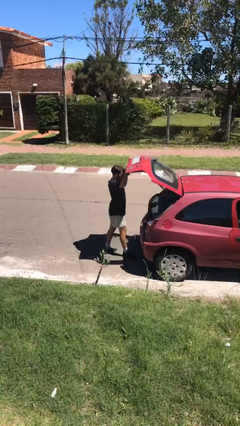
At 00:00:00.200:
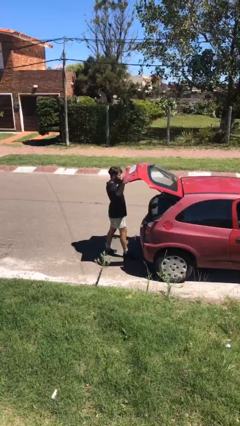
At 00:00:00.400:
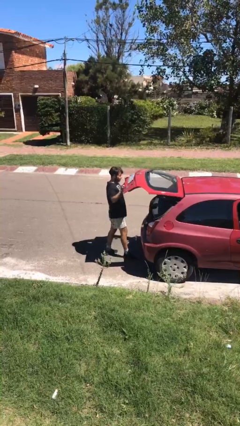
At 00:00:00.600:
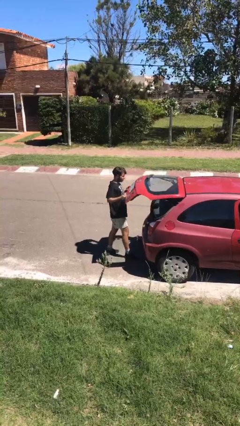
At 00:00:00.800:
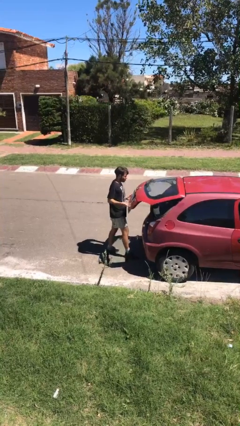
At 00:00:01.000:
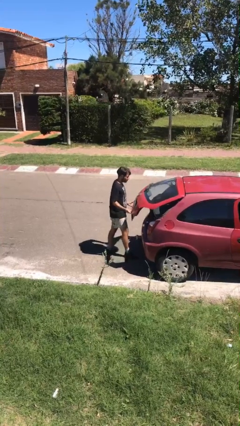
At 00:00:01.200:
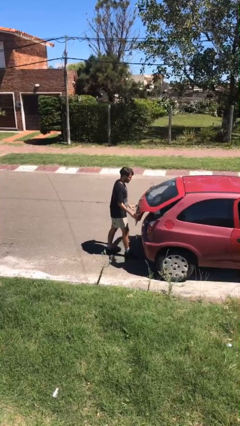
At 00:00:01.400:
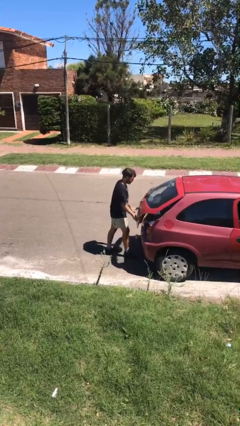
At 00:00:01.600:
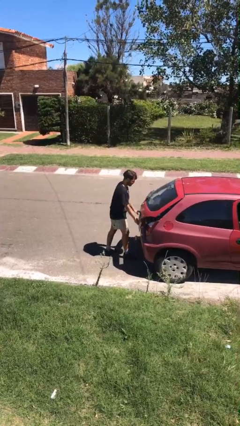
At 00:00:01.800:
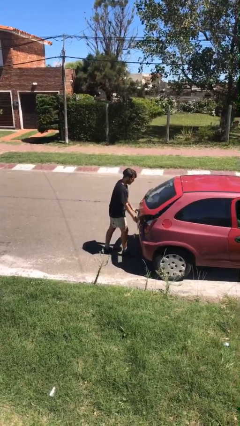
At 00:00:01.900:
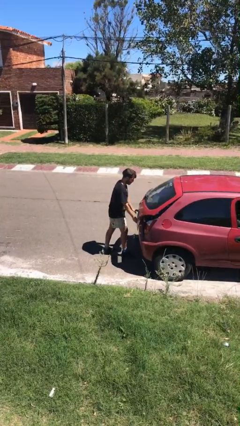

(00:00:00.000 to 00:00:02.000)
person closes car trunk

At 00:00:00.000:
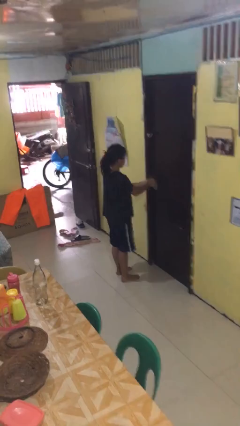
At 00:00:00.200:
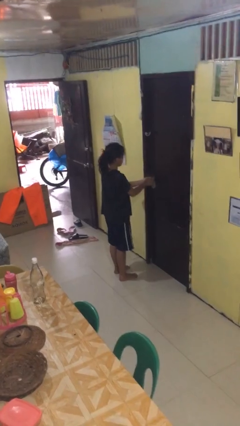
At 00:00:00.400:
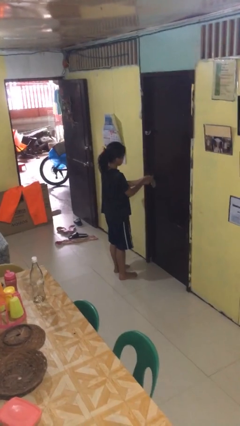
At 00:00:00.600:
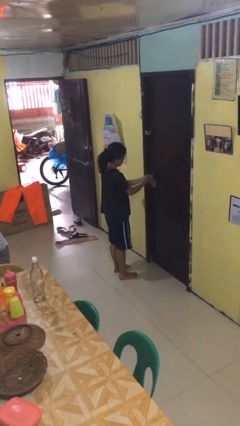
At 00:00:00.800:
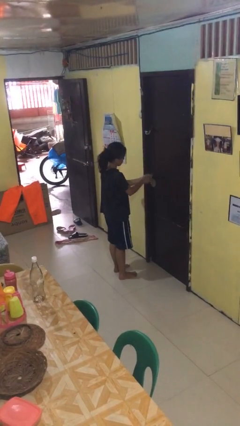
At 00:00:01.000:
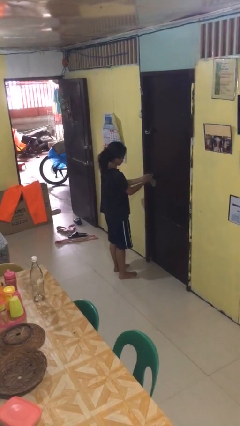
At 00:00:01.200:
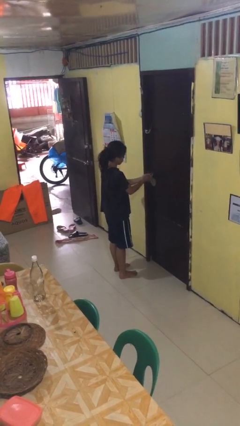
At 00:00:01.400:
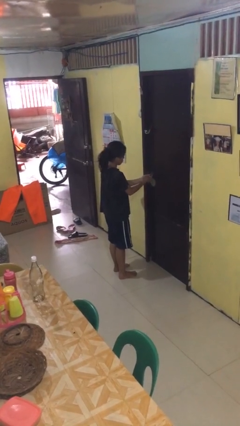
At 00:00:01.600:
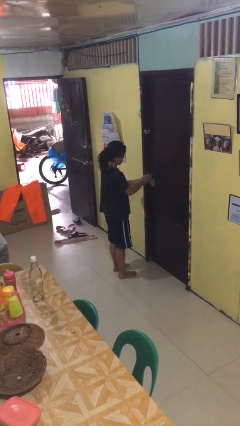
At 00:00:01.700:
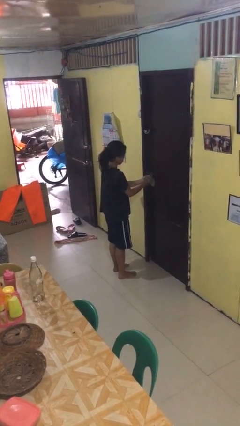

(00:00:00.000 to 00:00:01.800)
person locks door with keys

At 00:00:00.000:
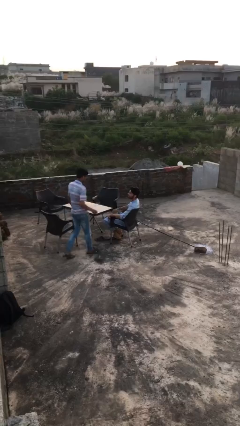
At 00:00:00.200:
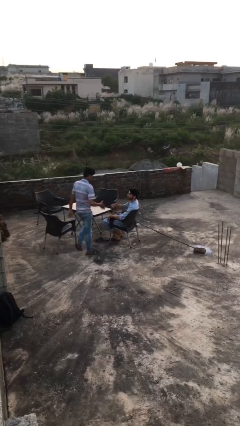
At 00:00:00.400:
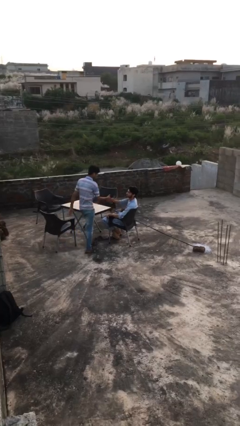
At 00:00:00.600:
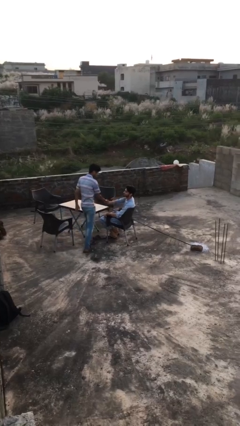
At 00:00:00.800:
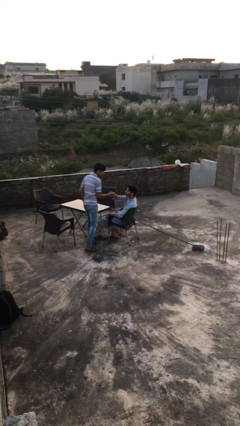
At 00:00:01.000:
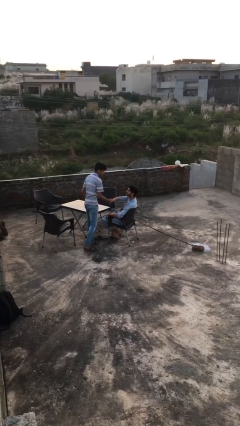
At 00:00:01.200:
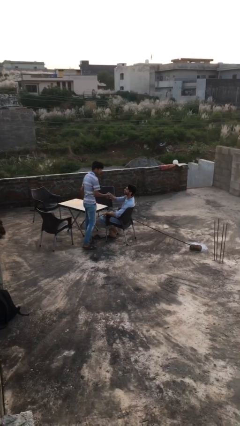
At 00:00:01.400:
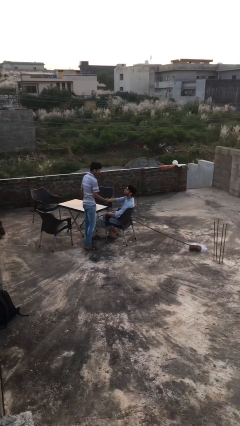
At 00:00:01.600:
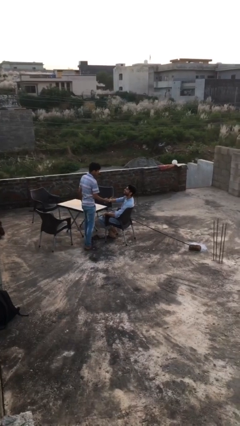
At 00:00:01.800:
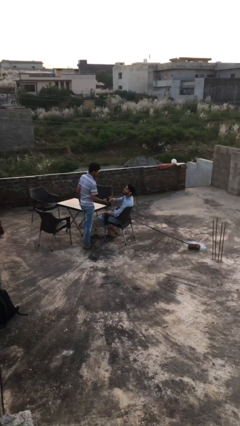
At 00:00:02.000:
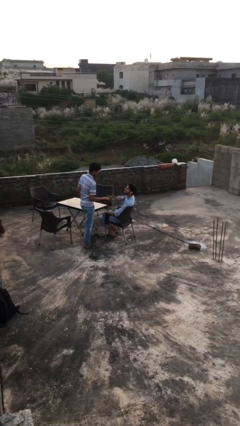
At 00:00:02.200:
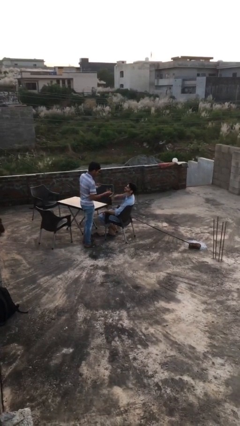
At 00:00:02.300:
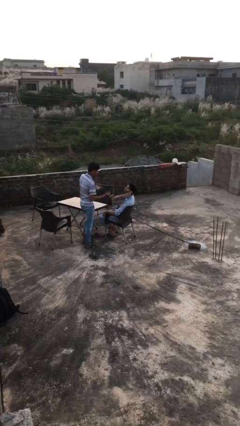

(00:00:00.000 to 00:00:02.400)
person shakes hand

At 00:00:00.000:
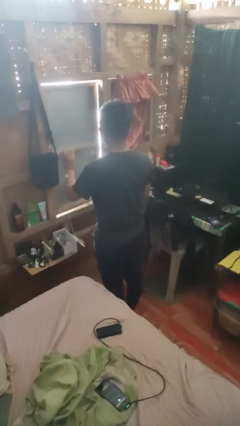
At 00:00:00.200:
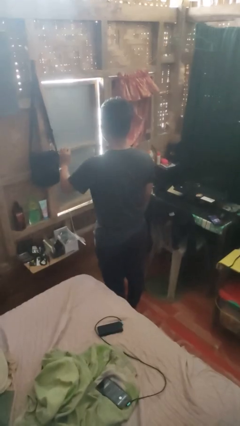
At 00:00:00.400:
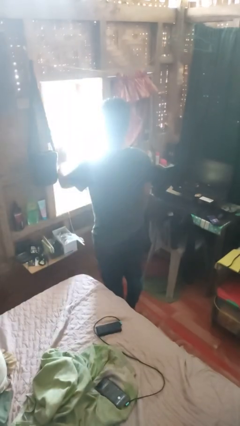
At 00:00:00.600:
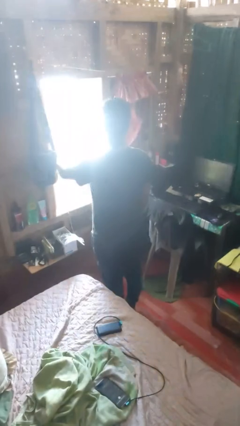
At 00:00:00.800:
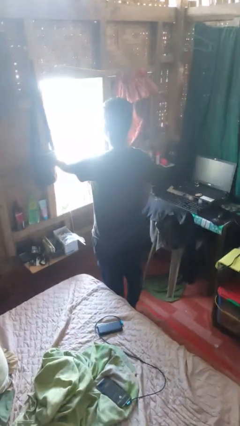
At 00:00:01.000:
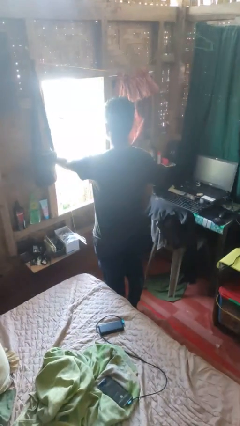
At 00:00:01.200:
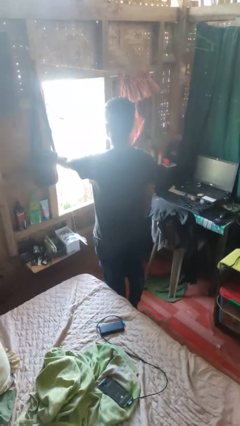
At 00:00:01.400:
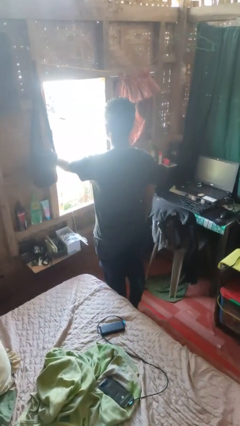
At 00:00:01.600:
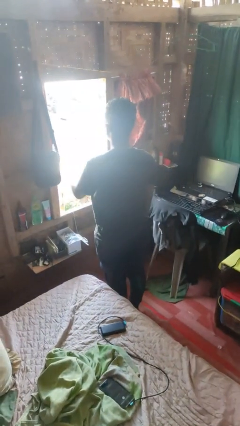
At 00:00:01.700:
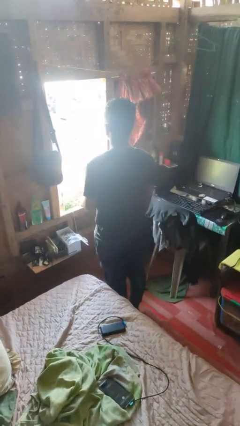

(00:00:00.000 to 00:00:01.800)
person opens home window

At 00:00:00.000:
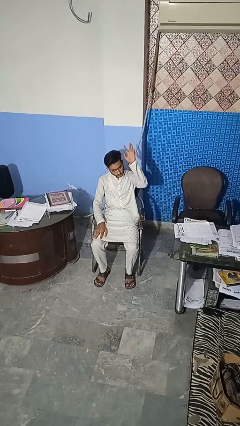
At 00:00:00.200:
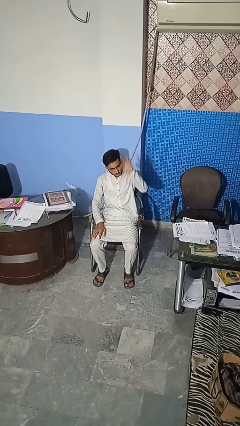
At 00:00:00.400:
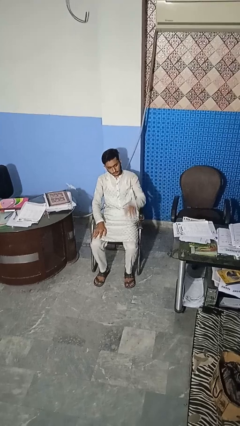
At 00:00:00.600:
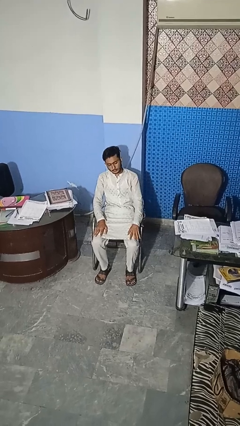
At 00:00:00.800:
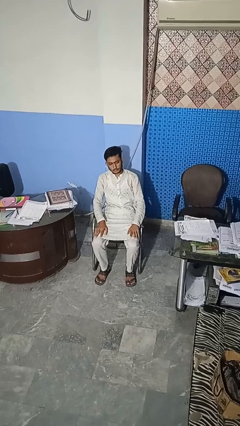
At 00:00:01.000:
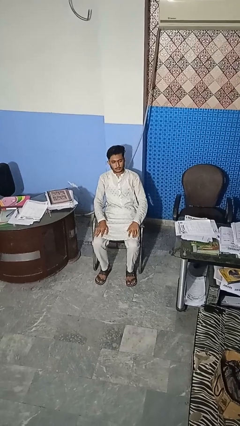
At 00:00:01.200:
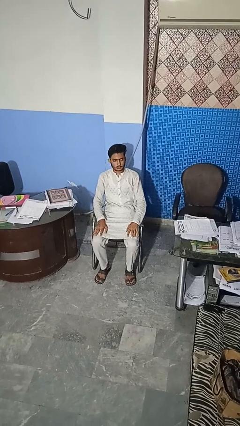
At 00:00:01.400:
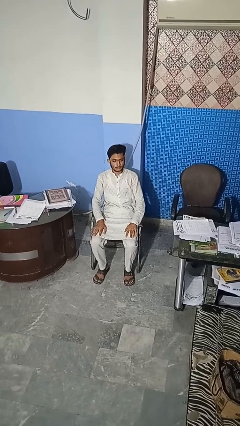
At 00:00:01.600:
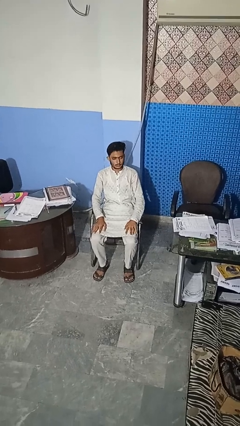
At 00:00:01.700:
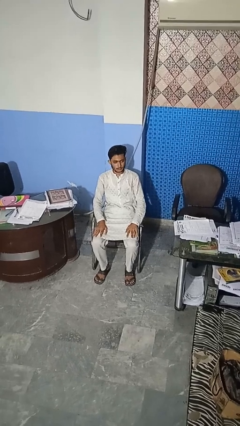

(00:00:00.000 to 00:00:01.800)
person gestures lower hand

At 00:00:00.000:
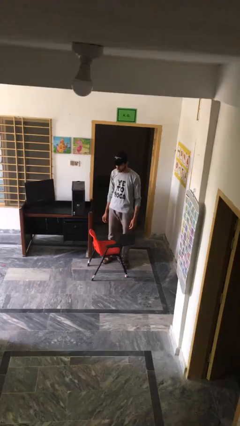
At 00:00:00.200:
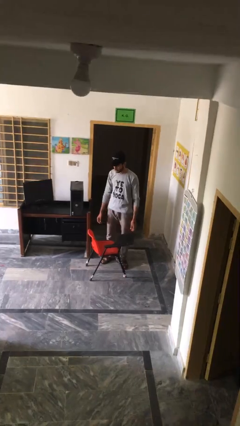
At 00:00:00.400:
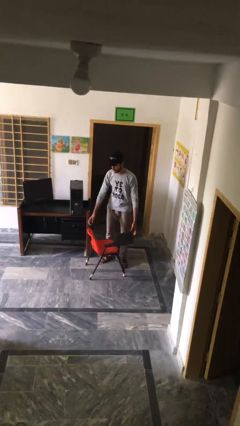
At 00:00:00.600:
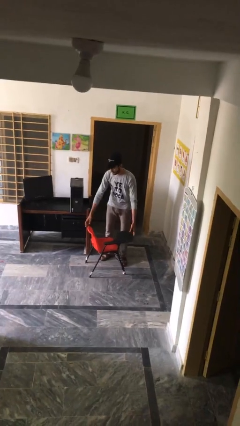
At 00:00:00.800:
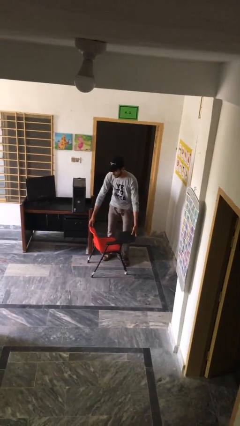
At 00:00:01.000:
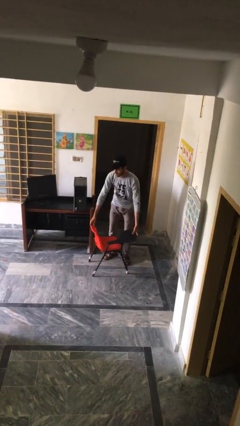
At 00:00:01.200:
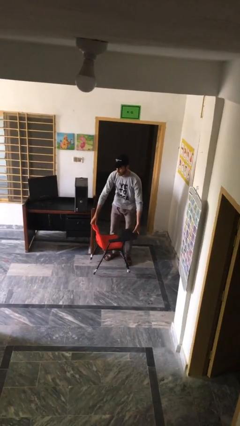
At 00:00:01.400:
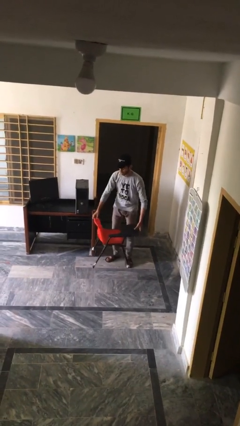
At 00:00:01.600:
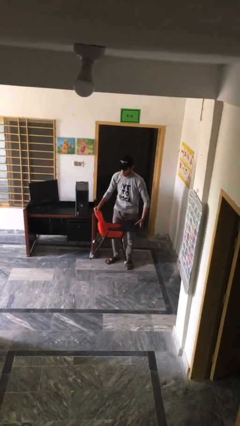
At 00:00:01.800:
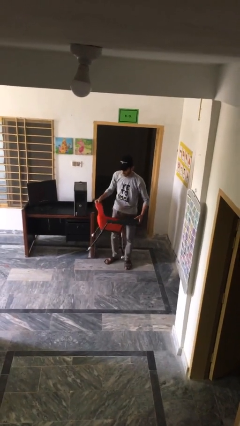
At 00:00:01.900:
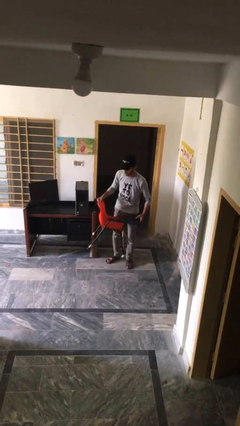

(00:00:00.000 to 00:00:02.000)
person picks up object from floor

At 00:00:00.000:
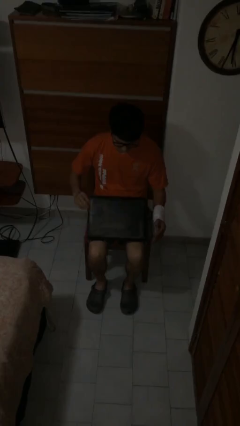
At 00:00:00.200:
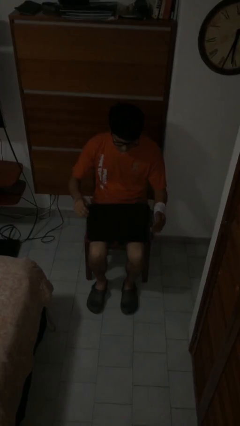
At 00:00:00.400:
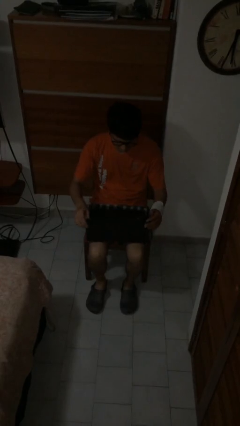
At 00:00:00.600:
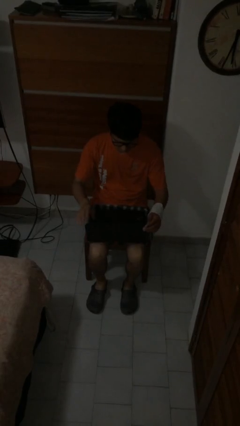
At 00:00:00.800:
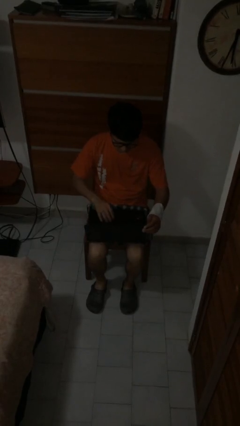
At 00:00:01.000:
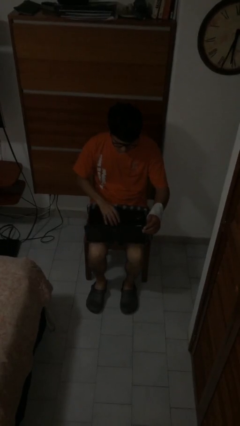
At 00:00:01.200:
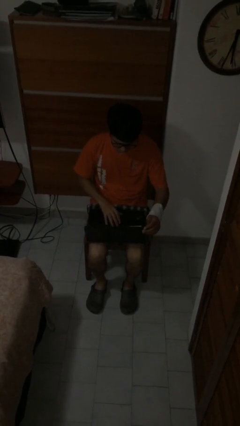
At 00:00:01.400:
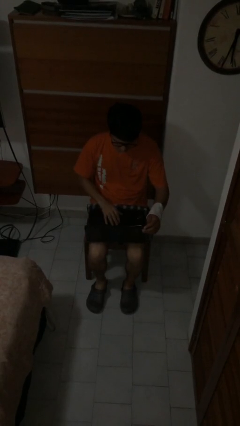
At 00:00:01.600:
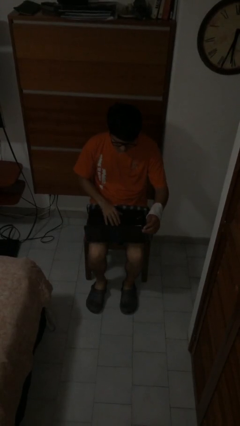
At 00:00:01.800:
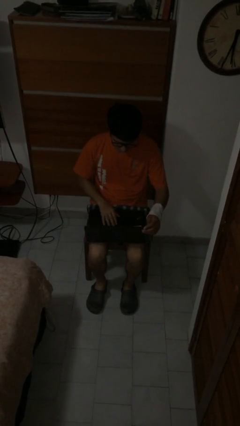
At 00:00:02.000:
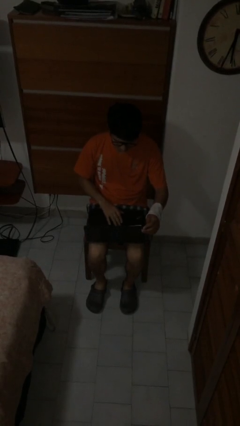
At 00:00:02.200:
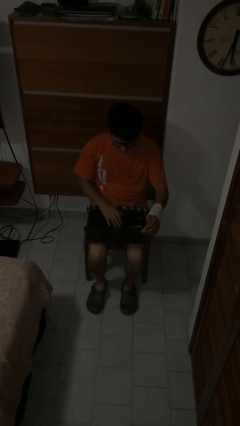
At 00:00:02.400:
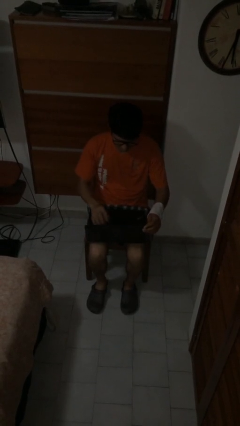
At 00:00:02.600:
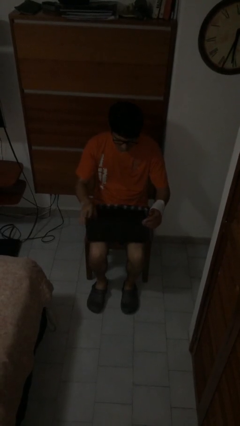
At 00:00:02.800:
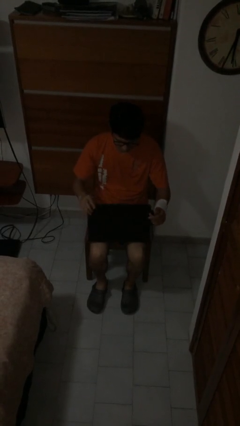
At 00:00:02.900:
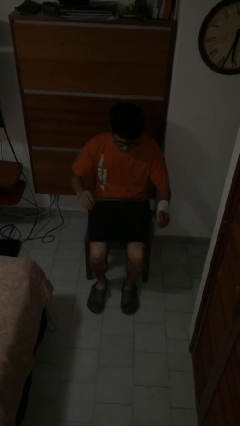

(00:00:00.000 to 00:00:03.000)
person interacts with laptop

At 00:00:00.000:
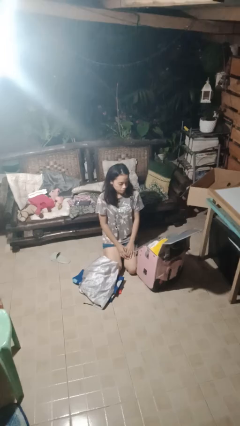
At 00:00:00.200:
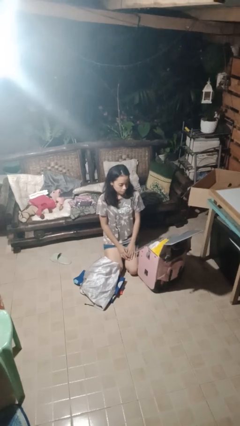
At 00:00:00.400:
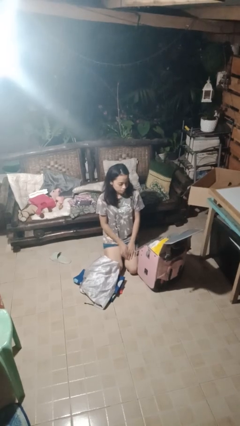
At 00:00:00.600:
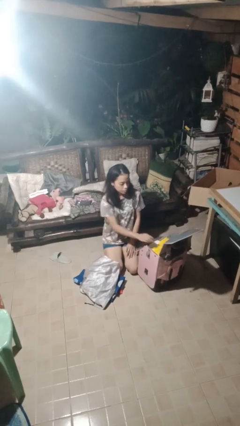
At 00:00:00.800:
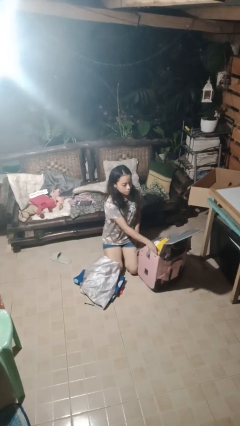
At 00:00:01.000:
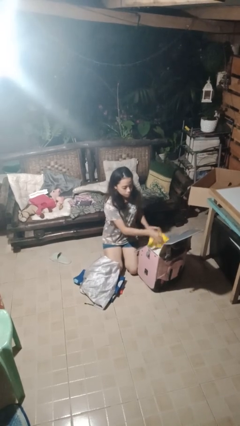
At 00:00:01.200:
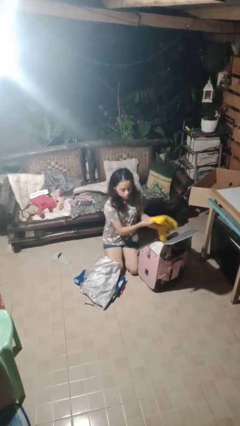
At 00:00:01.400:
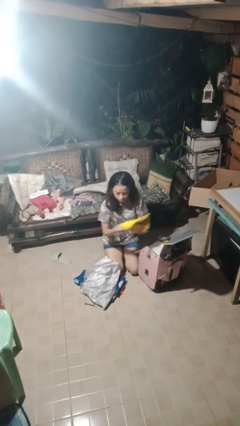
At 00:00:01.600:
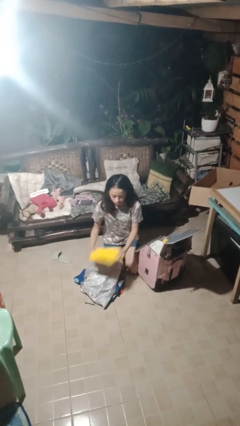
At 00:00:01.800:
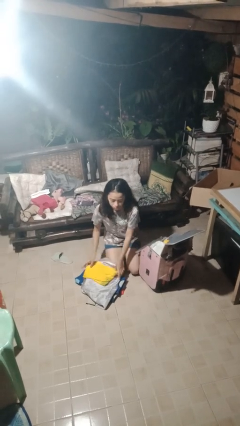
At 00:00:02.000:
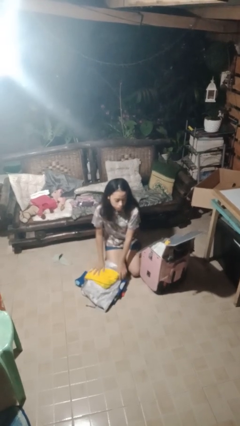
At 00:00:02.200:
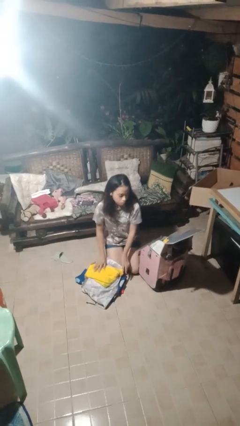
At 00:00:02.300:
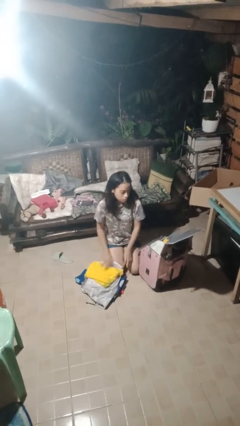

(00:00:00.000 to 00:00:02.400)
person unloads clothes from suitcase
